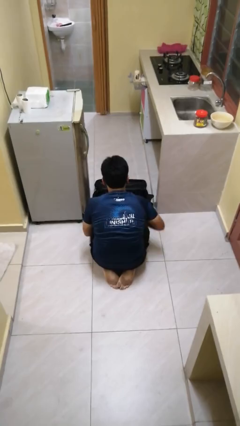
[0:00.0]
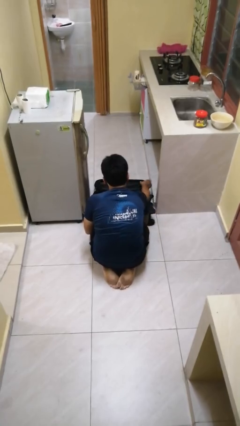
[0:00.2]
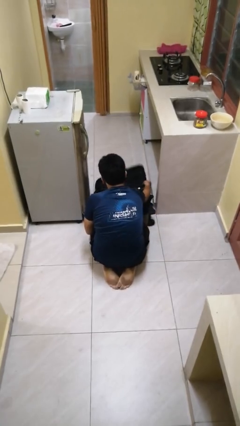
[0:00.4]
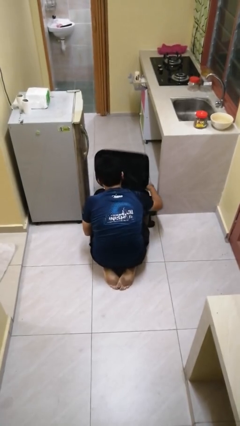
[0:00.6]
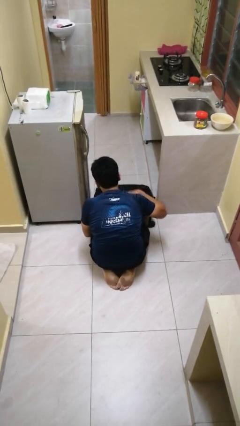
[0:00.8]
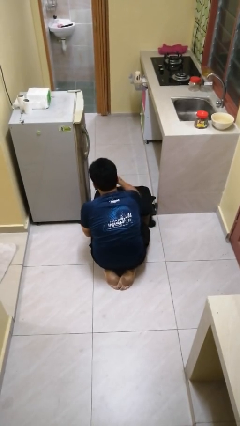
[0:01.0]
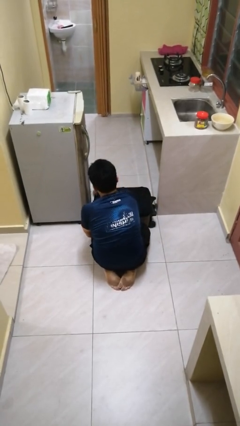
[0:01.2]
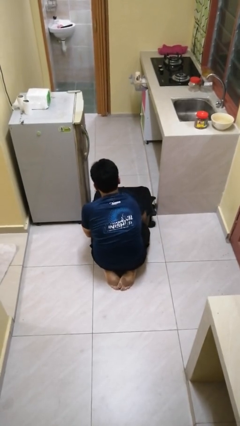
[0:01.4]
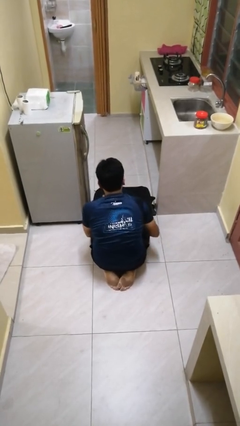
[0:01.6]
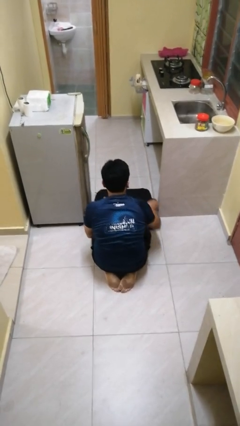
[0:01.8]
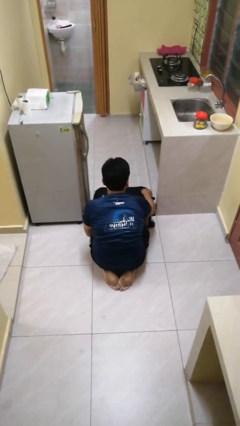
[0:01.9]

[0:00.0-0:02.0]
person closes suitcase

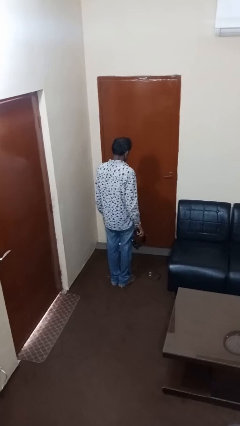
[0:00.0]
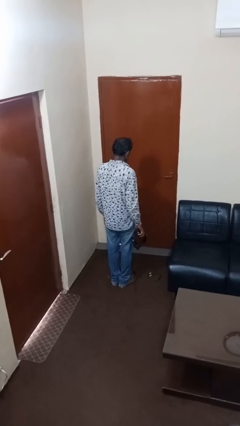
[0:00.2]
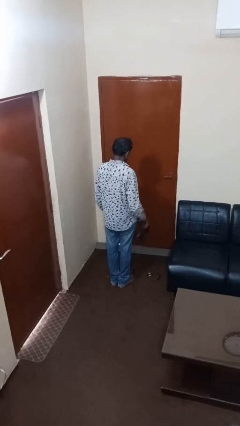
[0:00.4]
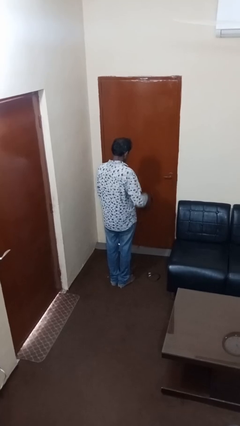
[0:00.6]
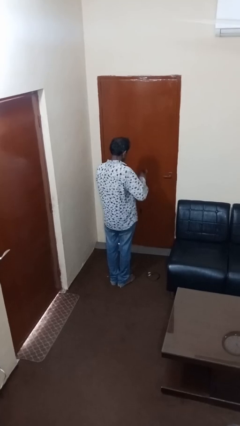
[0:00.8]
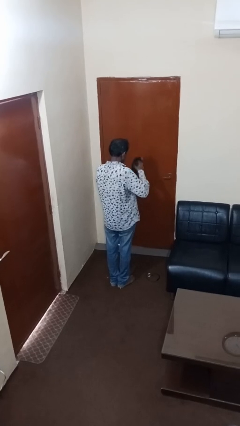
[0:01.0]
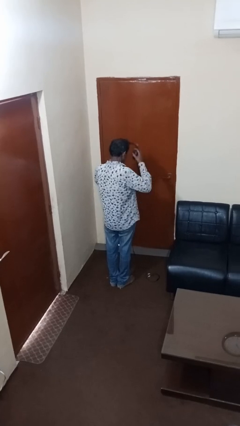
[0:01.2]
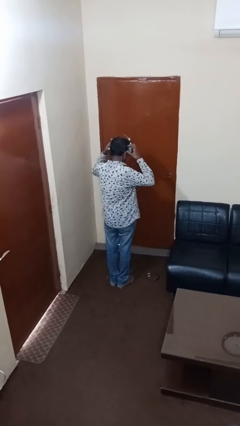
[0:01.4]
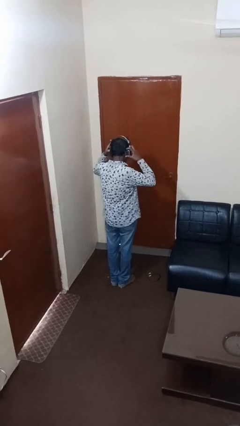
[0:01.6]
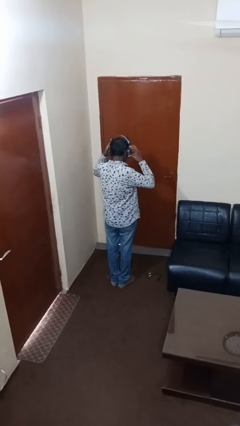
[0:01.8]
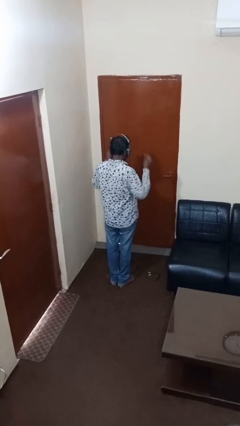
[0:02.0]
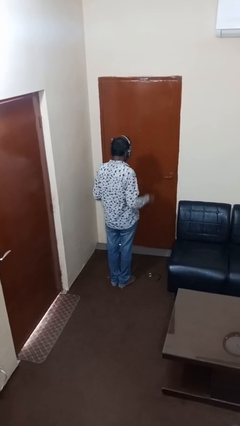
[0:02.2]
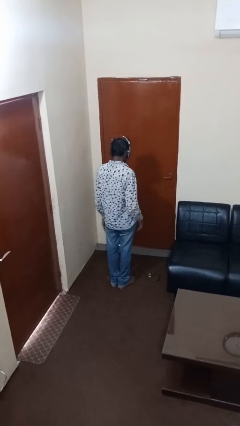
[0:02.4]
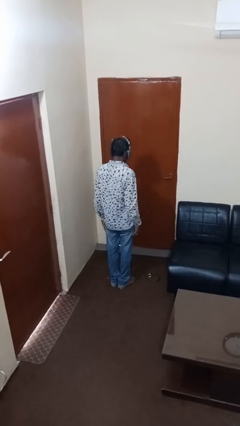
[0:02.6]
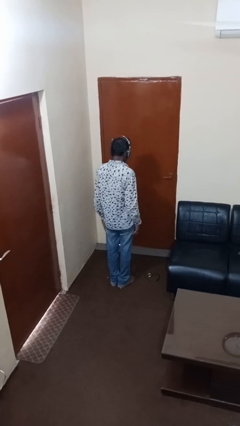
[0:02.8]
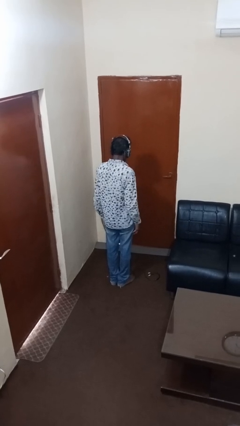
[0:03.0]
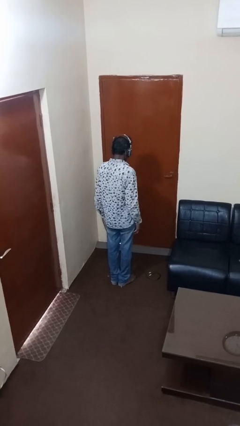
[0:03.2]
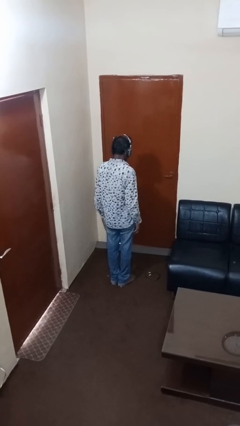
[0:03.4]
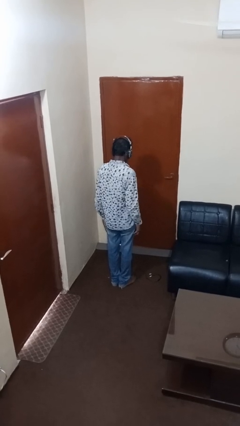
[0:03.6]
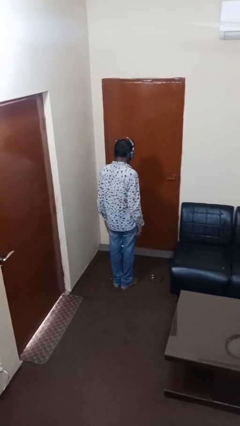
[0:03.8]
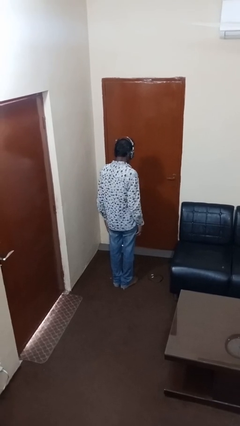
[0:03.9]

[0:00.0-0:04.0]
person puts on headphones

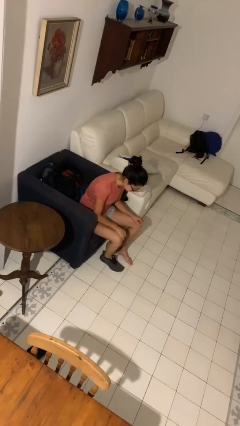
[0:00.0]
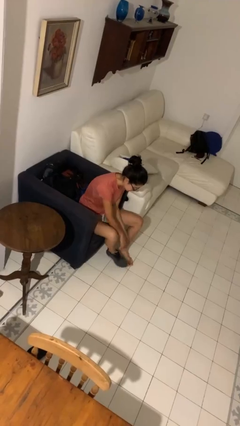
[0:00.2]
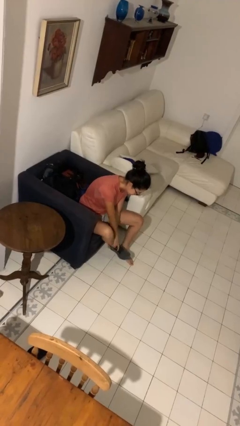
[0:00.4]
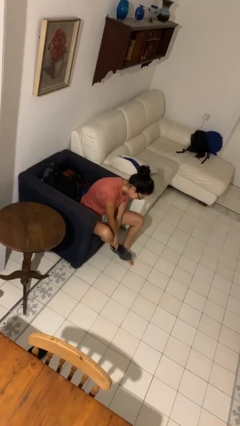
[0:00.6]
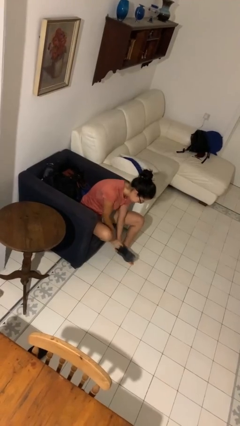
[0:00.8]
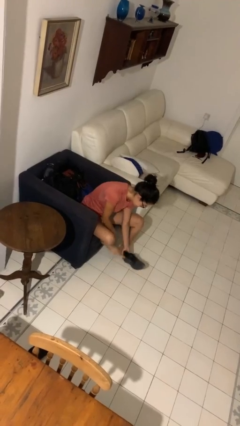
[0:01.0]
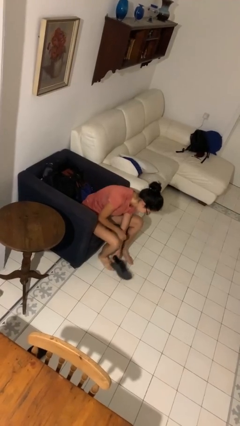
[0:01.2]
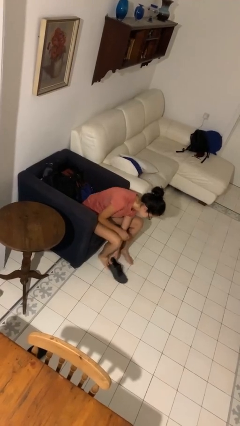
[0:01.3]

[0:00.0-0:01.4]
person takes off shoes

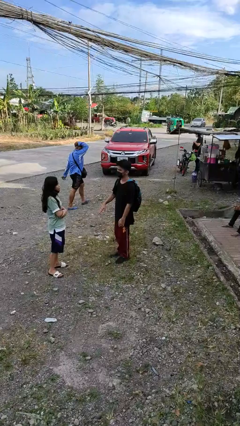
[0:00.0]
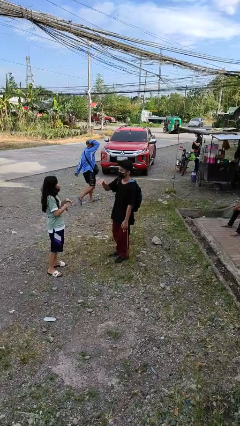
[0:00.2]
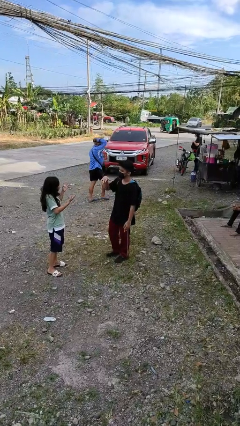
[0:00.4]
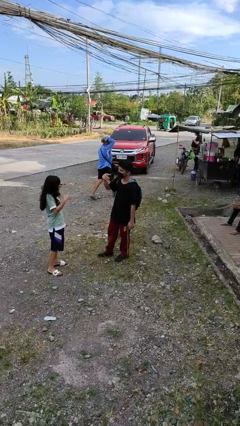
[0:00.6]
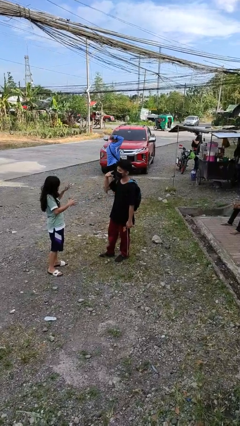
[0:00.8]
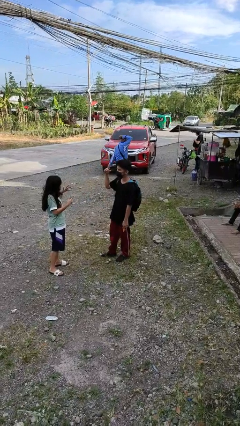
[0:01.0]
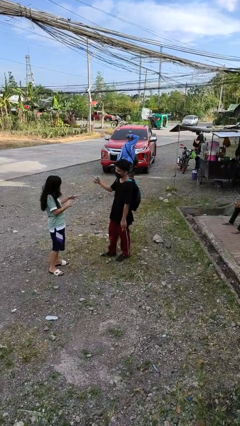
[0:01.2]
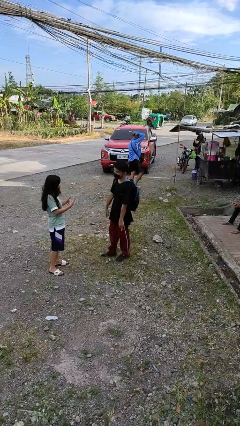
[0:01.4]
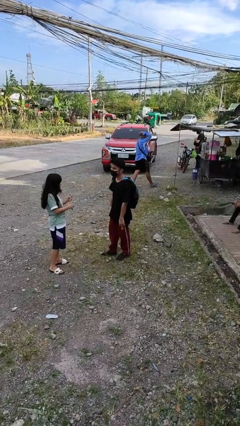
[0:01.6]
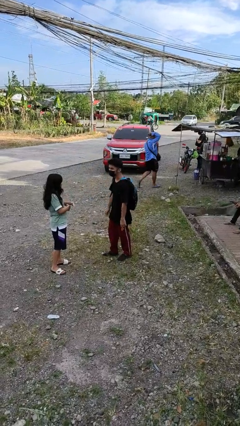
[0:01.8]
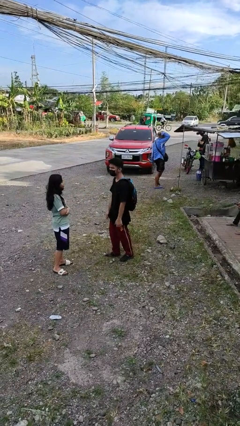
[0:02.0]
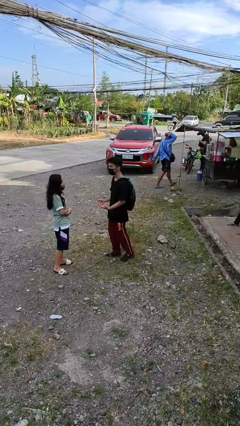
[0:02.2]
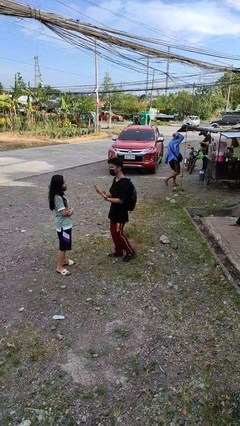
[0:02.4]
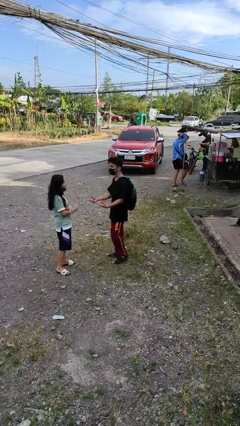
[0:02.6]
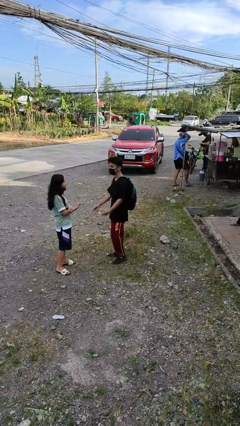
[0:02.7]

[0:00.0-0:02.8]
person talks to person

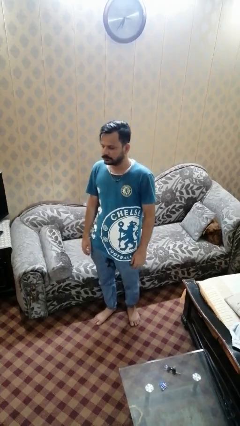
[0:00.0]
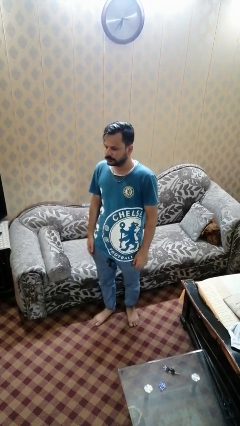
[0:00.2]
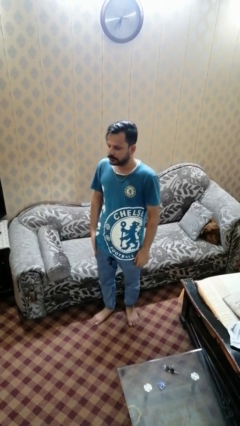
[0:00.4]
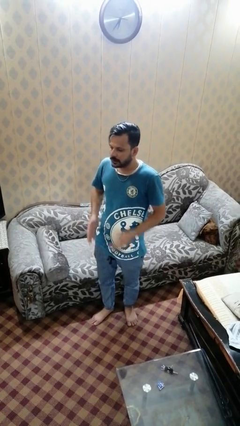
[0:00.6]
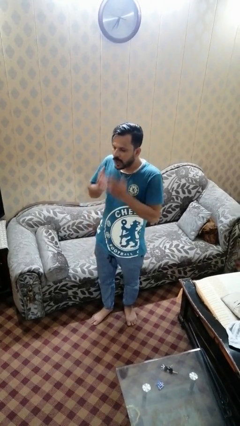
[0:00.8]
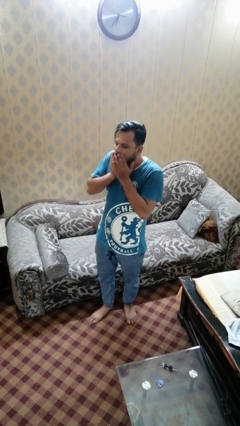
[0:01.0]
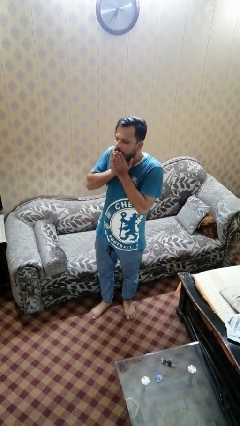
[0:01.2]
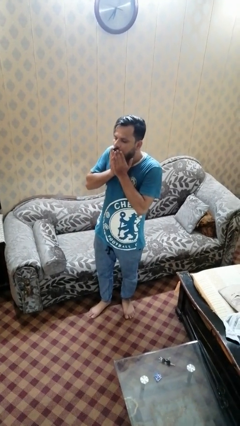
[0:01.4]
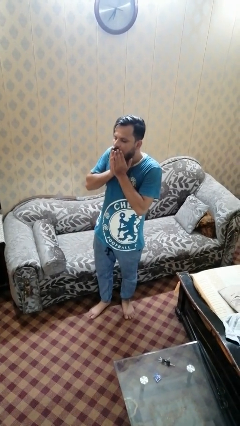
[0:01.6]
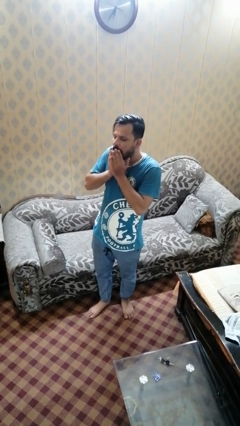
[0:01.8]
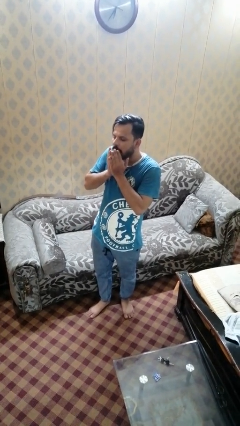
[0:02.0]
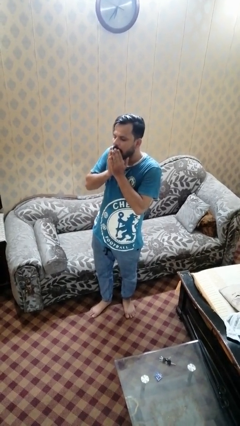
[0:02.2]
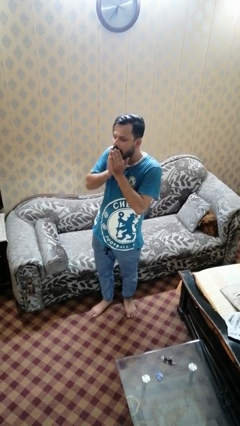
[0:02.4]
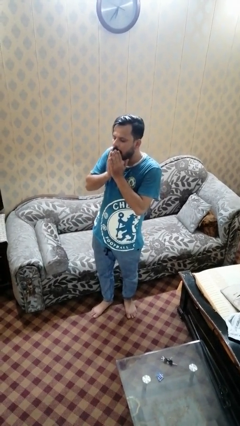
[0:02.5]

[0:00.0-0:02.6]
person yawns

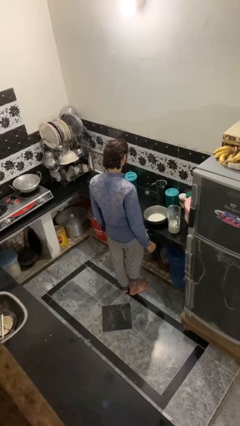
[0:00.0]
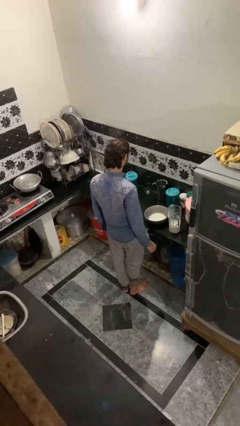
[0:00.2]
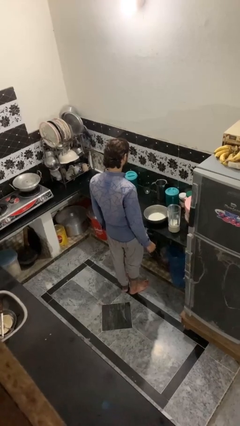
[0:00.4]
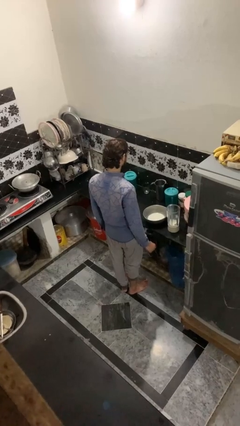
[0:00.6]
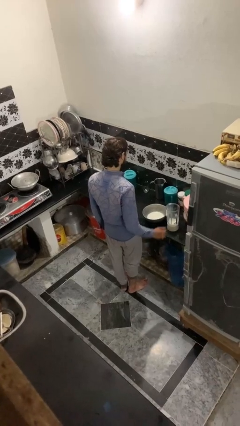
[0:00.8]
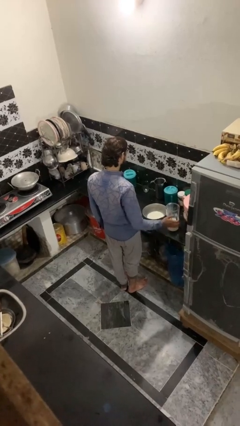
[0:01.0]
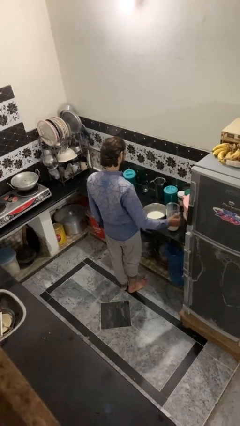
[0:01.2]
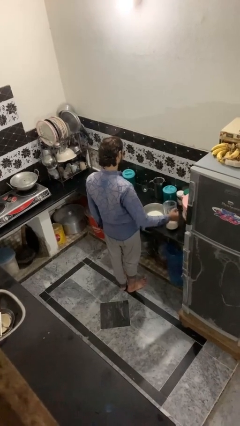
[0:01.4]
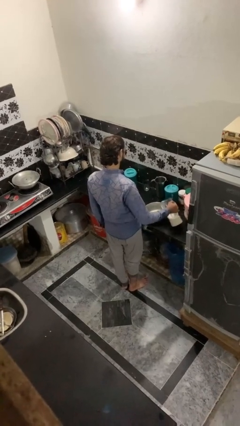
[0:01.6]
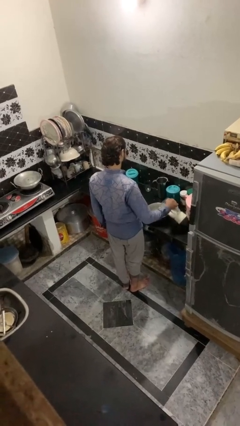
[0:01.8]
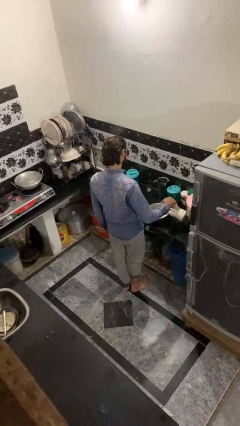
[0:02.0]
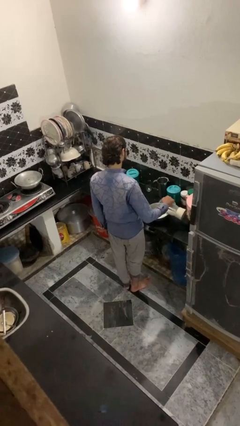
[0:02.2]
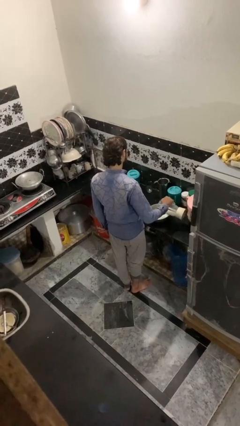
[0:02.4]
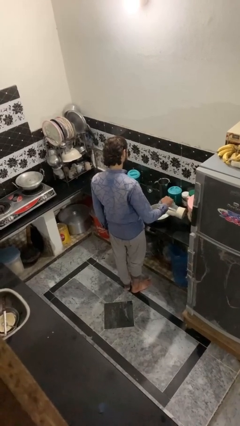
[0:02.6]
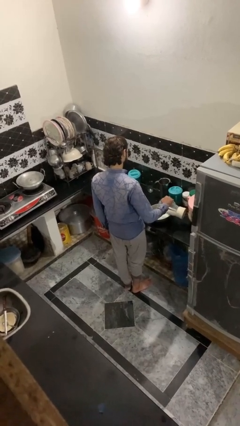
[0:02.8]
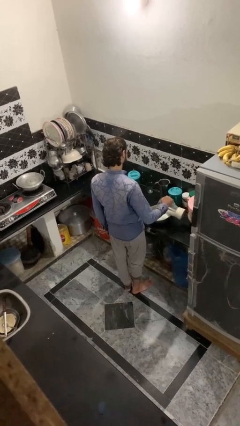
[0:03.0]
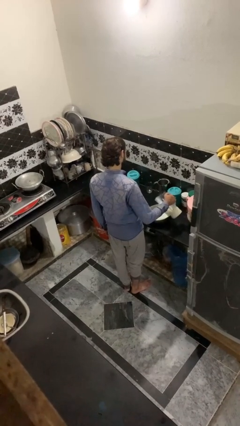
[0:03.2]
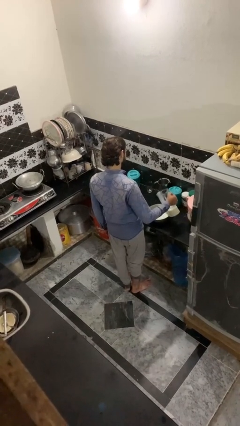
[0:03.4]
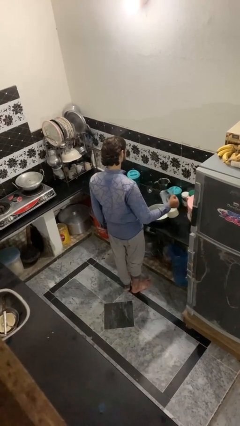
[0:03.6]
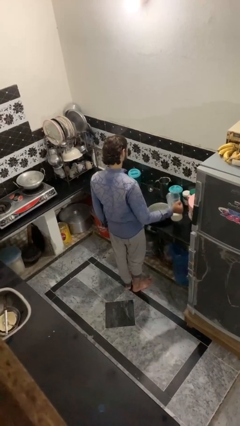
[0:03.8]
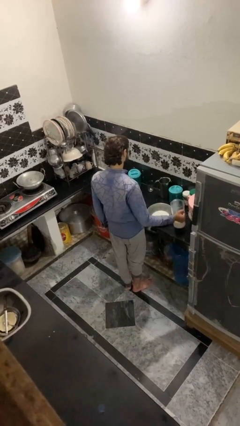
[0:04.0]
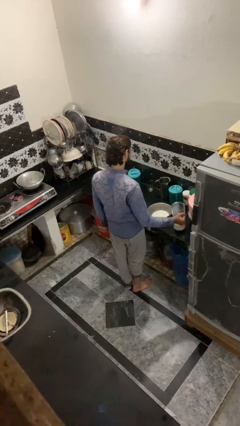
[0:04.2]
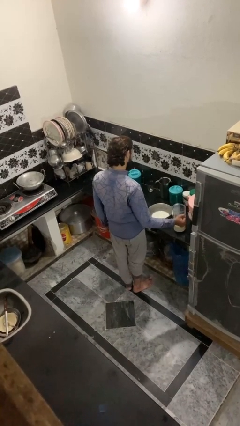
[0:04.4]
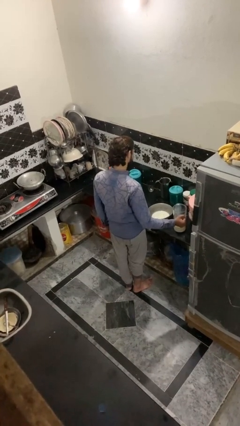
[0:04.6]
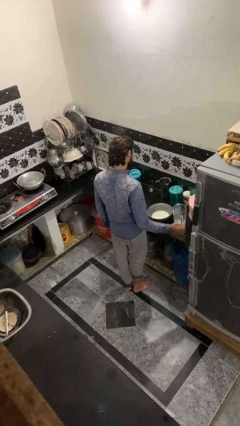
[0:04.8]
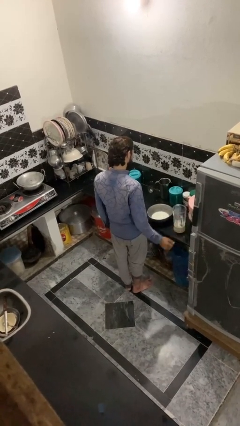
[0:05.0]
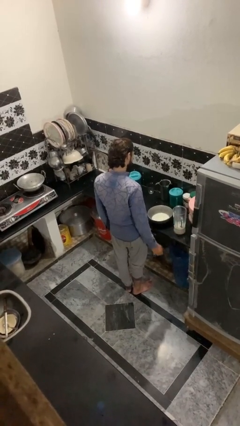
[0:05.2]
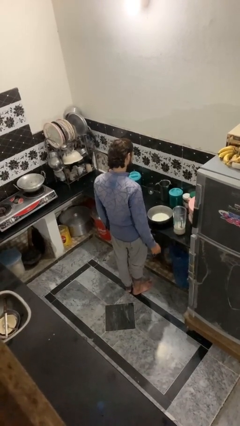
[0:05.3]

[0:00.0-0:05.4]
person pours into bowl
